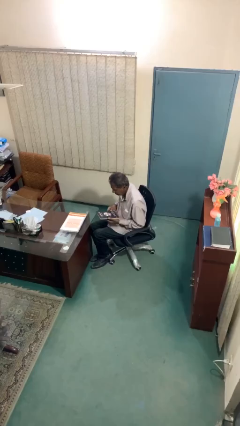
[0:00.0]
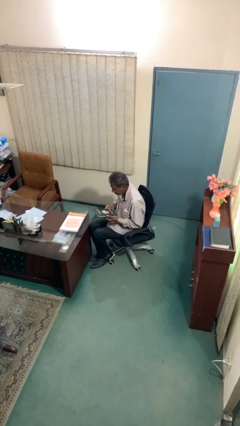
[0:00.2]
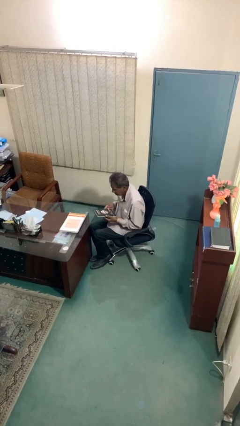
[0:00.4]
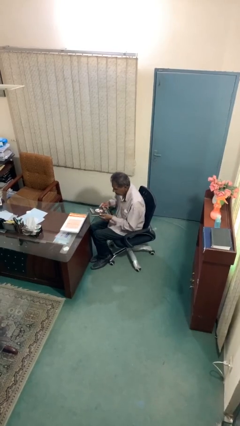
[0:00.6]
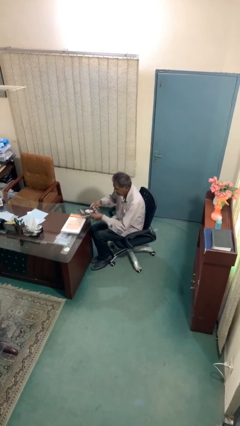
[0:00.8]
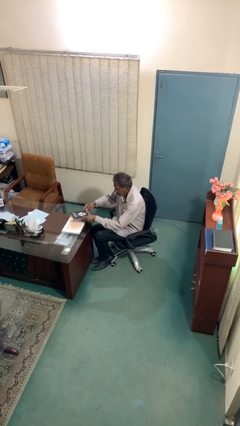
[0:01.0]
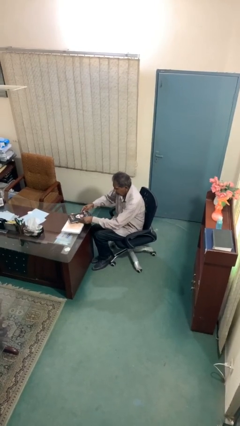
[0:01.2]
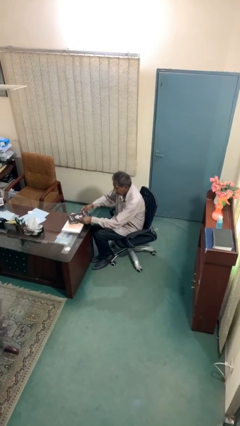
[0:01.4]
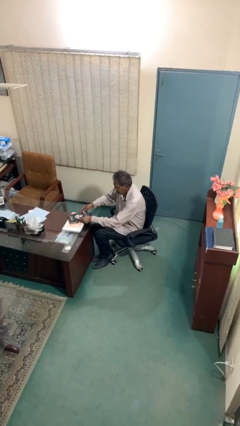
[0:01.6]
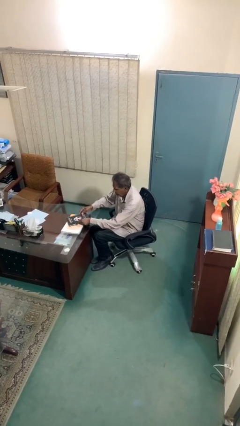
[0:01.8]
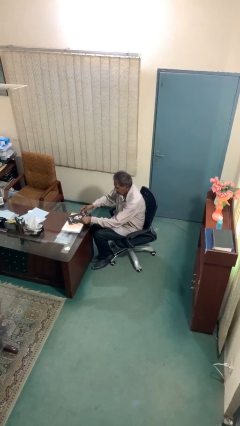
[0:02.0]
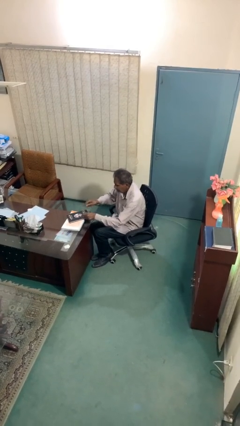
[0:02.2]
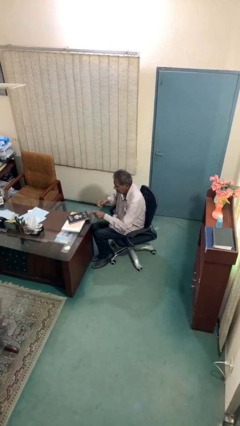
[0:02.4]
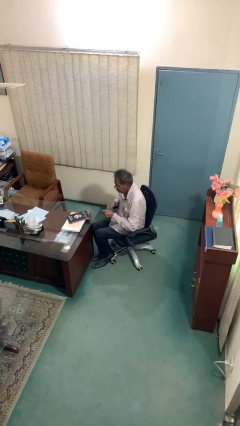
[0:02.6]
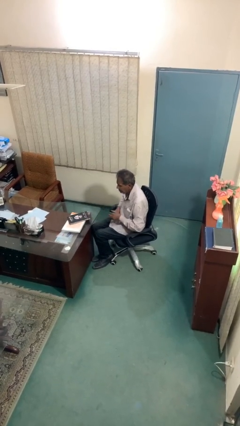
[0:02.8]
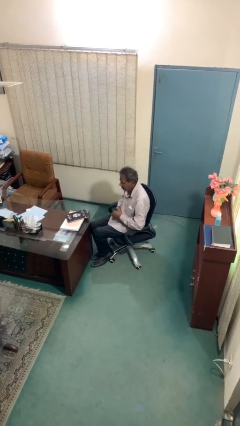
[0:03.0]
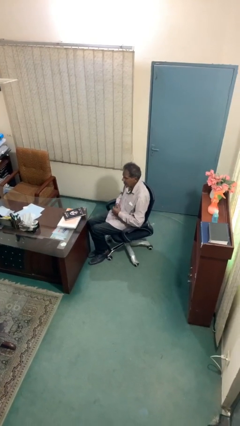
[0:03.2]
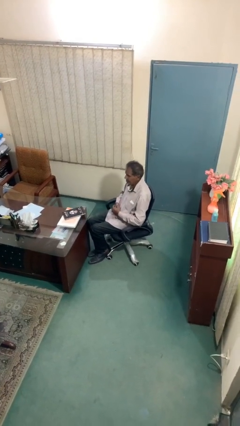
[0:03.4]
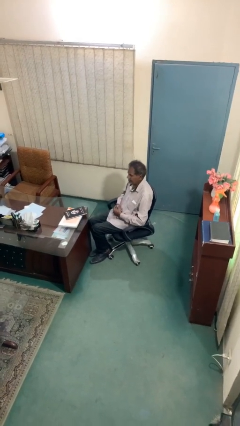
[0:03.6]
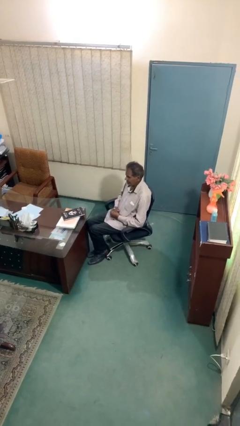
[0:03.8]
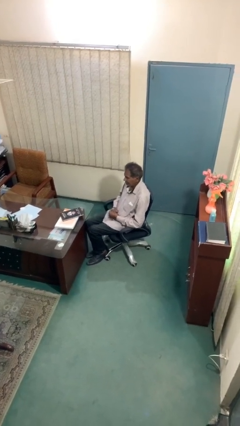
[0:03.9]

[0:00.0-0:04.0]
person puts down object on table

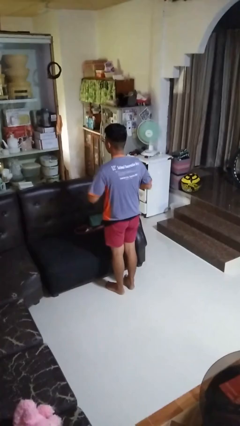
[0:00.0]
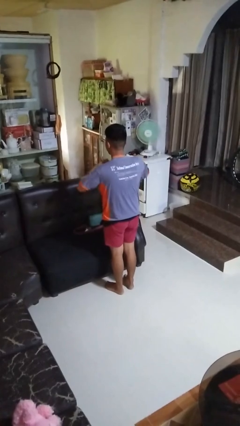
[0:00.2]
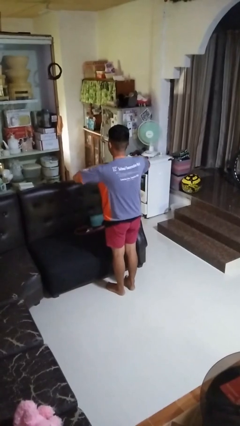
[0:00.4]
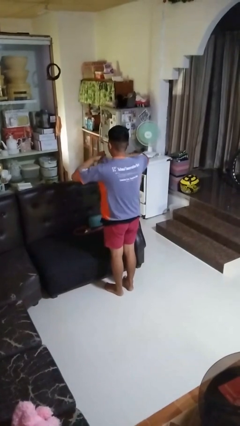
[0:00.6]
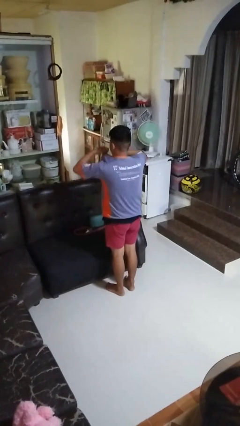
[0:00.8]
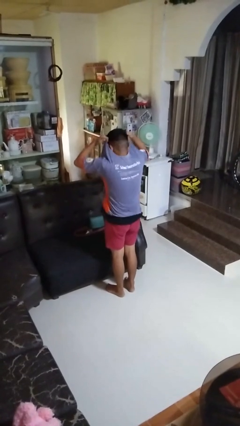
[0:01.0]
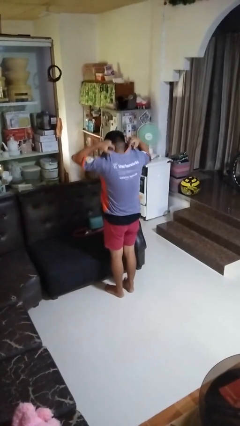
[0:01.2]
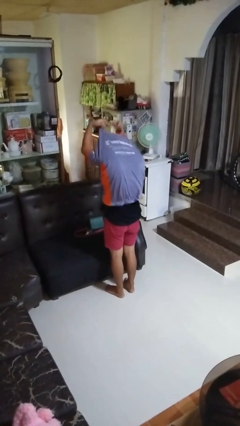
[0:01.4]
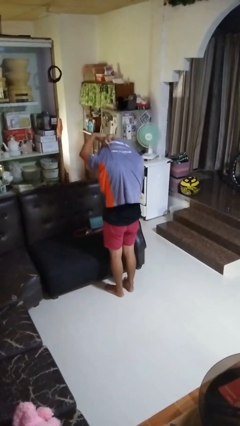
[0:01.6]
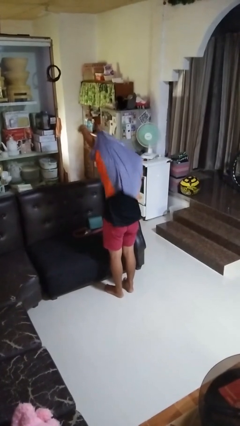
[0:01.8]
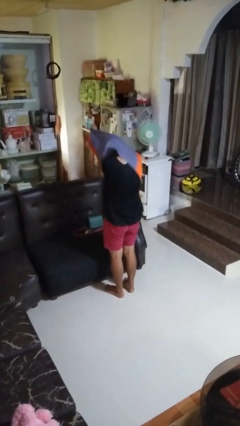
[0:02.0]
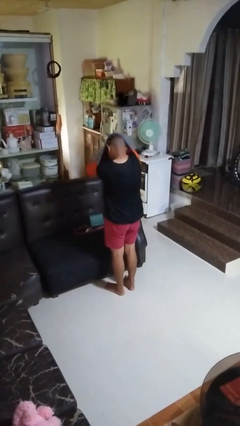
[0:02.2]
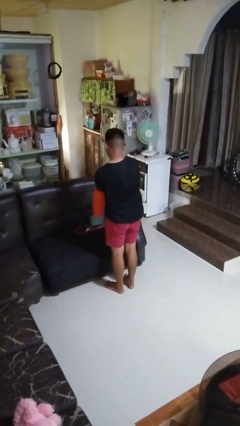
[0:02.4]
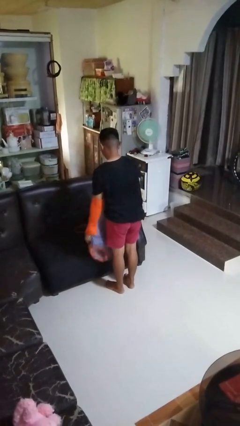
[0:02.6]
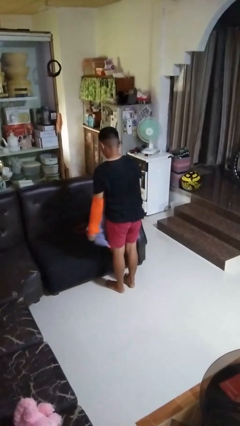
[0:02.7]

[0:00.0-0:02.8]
person takes off shirt

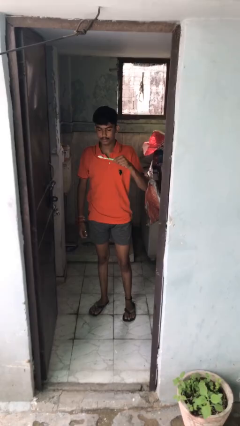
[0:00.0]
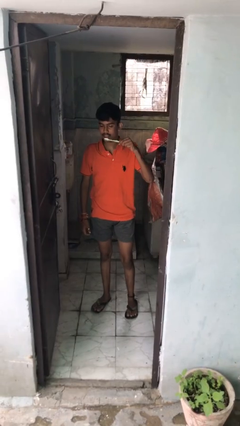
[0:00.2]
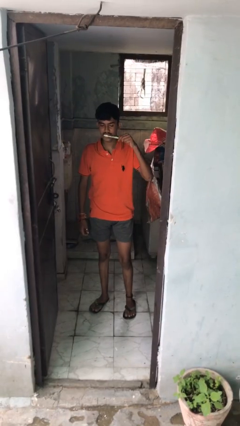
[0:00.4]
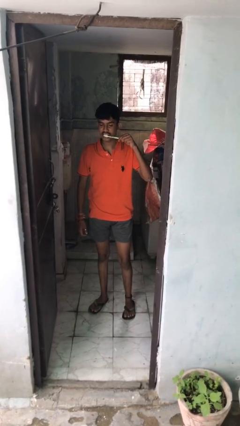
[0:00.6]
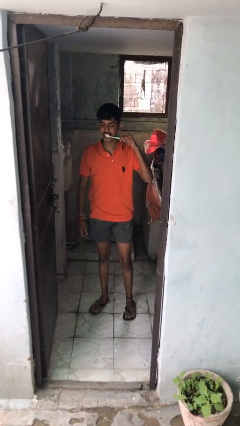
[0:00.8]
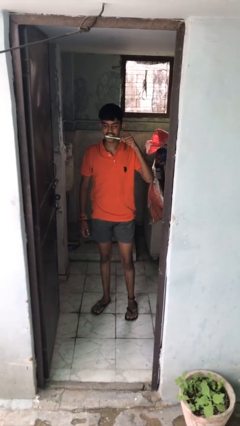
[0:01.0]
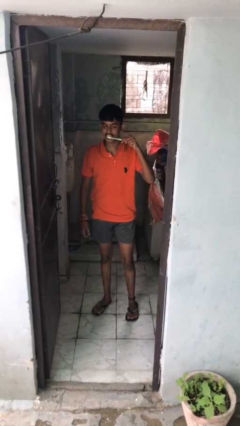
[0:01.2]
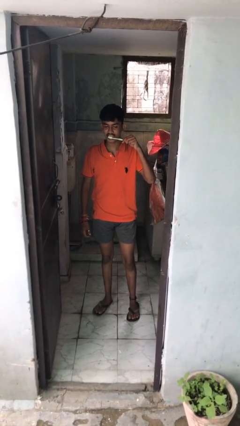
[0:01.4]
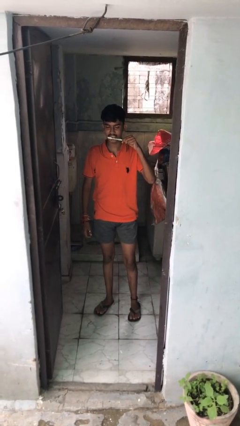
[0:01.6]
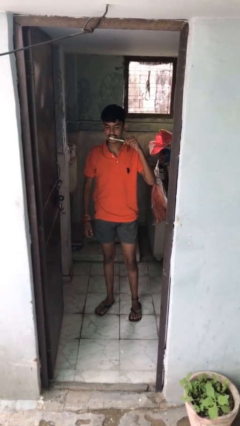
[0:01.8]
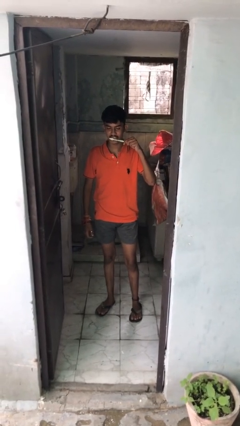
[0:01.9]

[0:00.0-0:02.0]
person brushes teeth

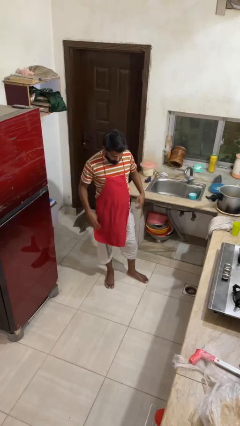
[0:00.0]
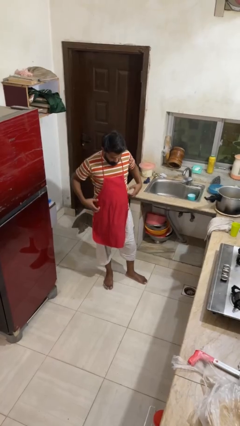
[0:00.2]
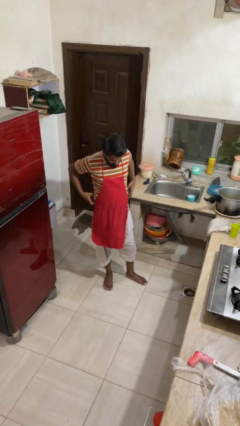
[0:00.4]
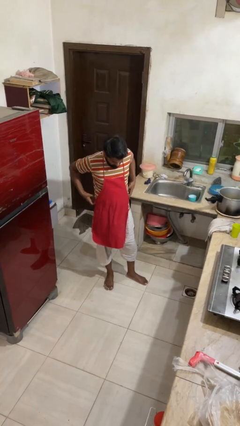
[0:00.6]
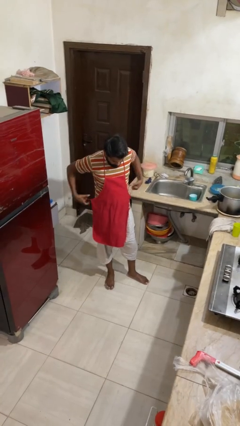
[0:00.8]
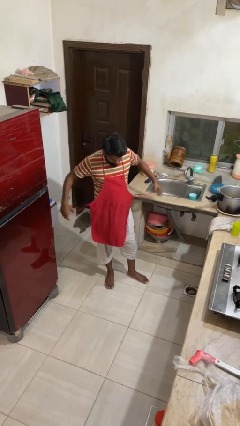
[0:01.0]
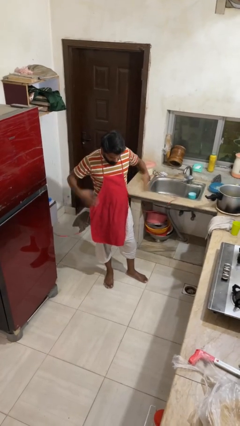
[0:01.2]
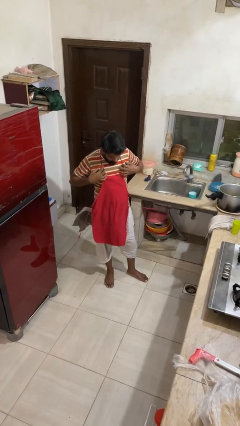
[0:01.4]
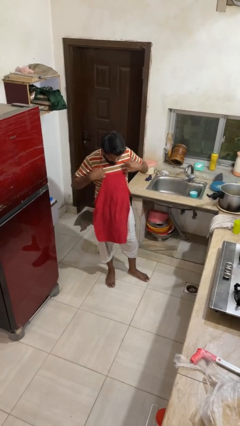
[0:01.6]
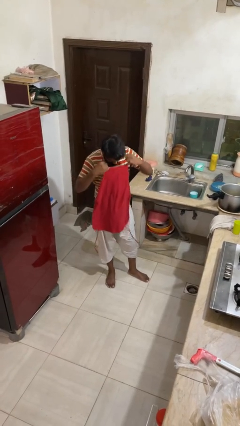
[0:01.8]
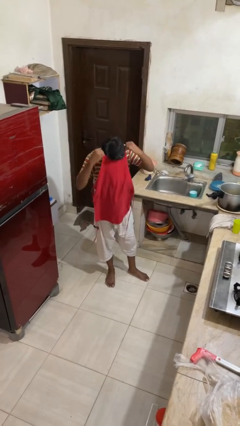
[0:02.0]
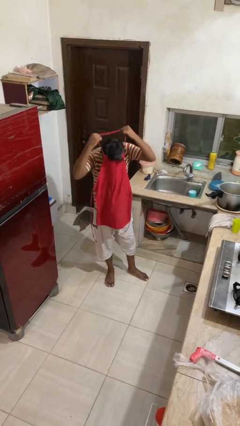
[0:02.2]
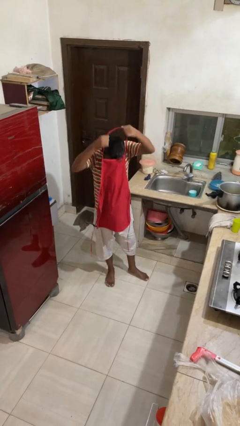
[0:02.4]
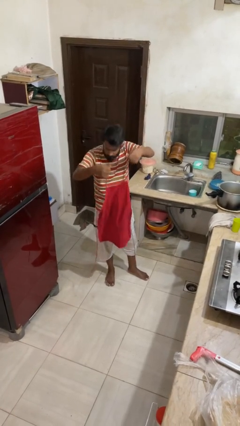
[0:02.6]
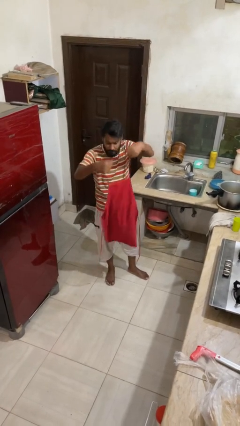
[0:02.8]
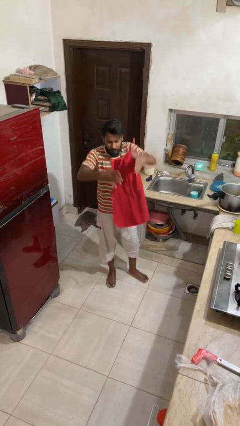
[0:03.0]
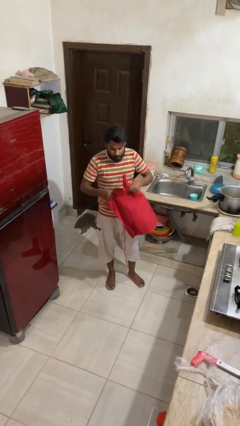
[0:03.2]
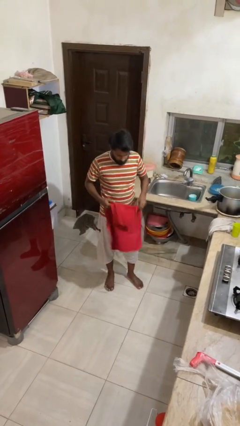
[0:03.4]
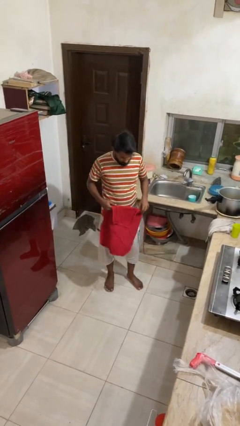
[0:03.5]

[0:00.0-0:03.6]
person takes off apron

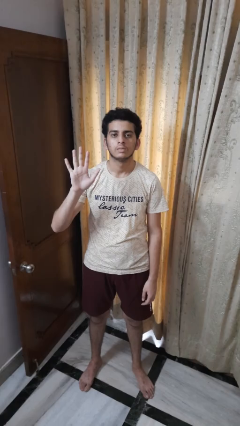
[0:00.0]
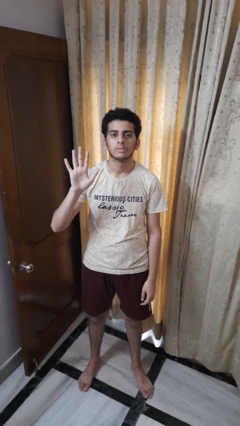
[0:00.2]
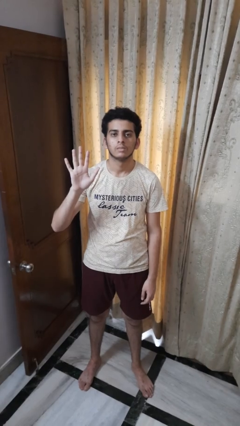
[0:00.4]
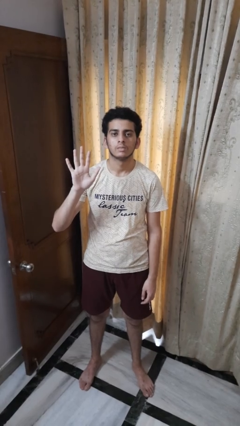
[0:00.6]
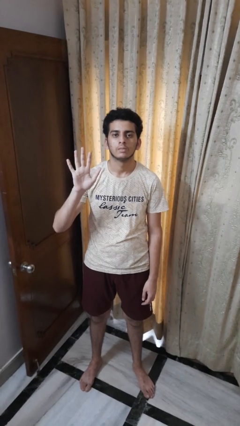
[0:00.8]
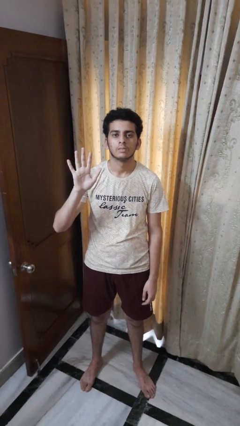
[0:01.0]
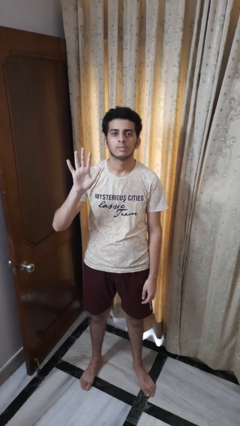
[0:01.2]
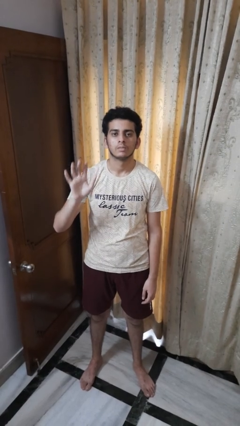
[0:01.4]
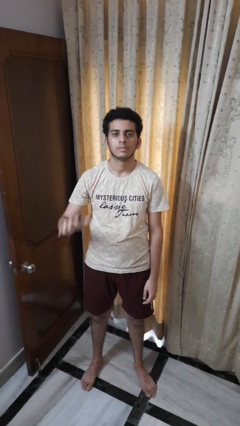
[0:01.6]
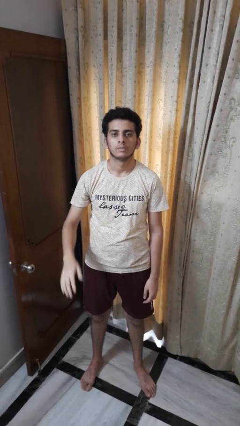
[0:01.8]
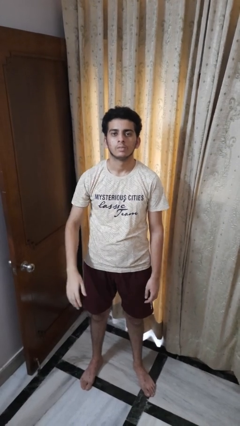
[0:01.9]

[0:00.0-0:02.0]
person gestures number five

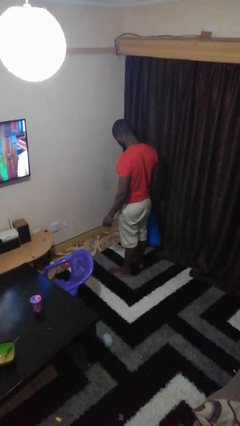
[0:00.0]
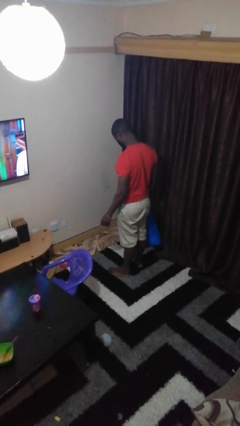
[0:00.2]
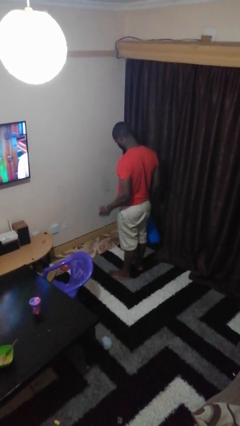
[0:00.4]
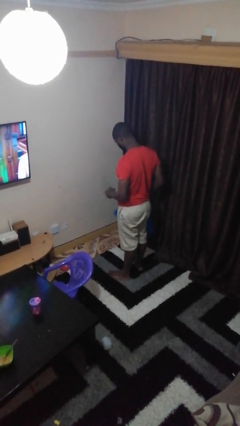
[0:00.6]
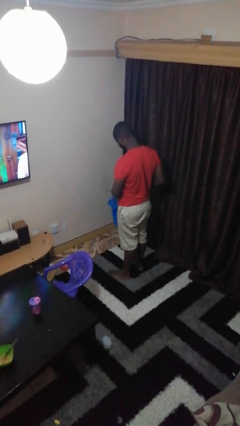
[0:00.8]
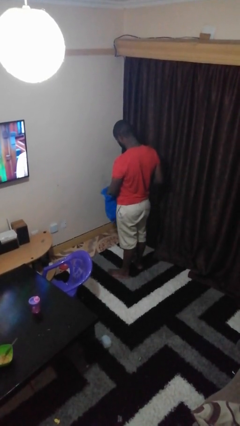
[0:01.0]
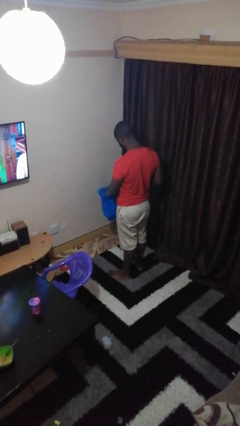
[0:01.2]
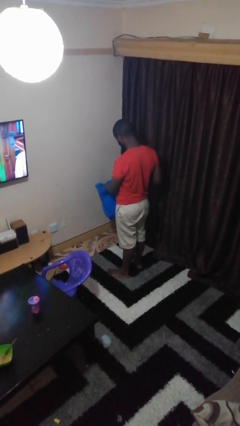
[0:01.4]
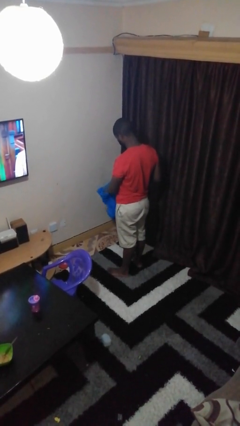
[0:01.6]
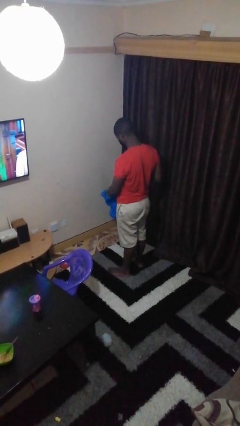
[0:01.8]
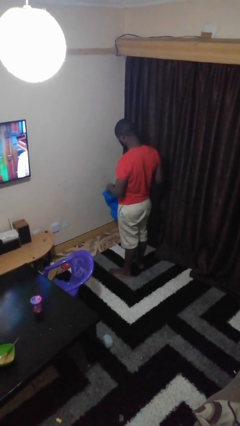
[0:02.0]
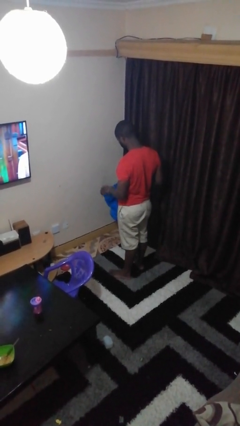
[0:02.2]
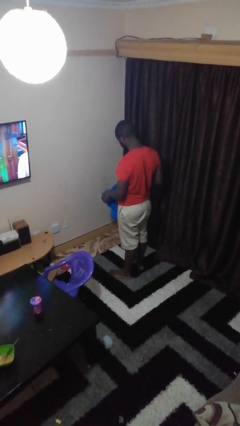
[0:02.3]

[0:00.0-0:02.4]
person puts object into bag

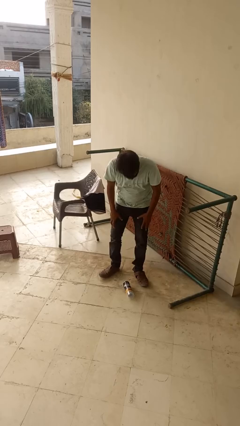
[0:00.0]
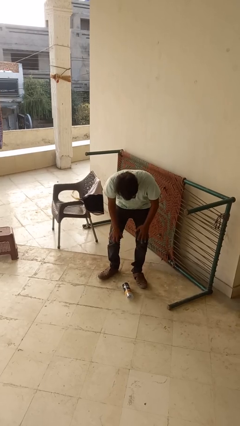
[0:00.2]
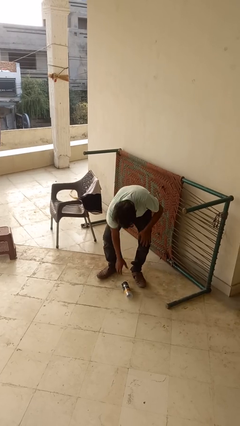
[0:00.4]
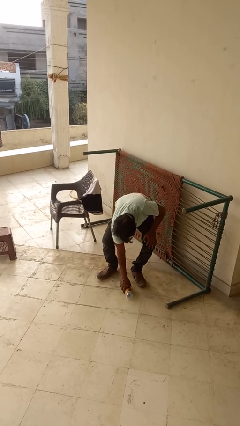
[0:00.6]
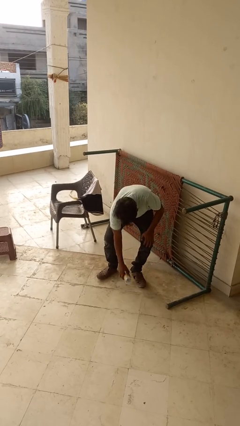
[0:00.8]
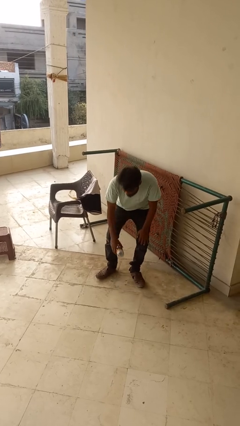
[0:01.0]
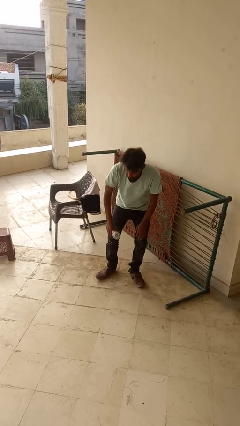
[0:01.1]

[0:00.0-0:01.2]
person picks up object from floor
